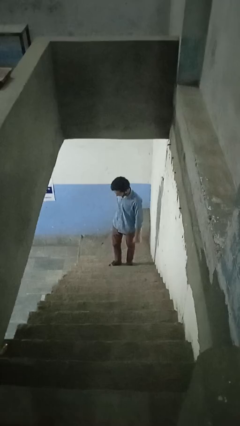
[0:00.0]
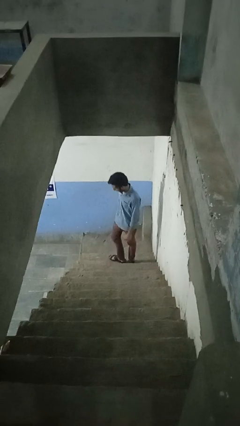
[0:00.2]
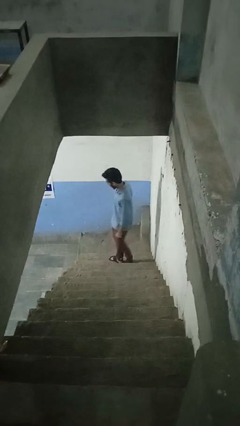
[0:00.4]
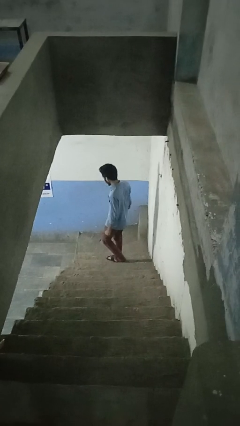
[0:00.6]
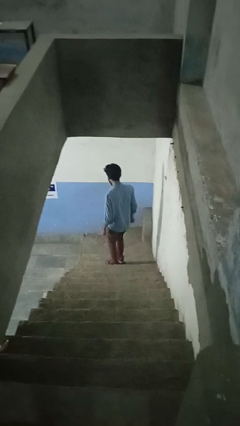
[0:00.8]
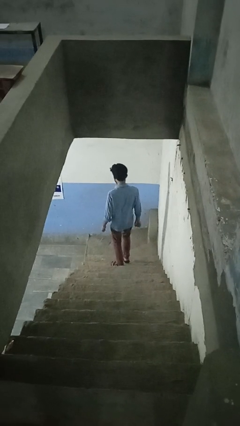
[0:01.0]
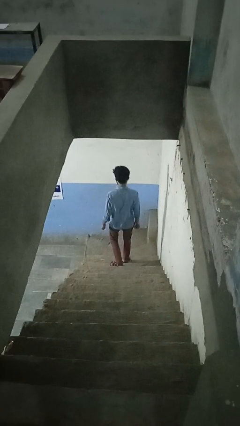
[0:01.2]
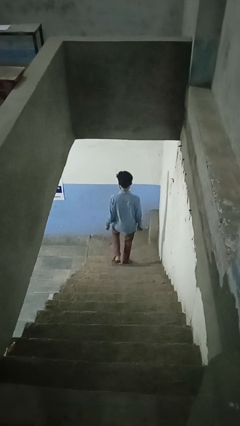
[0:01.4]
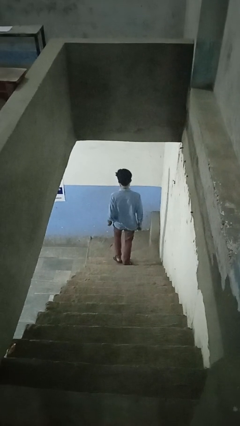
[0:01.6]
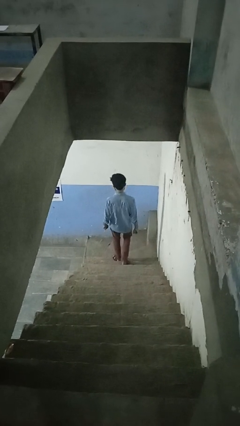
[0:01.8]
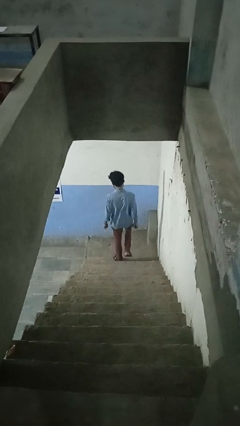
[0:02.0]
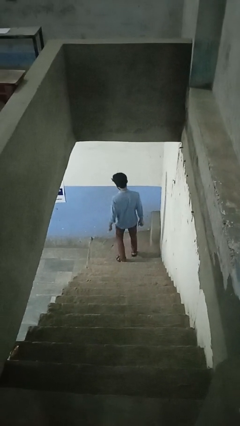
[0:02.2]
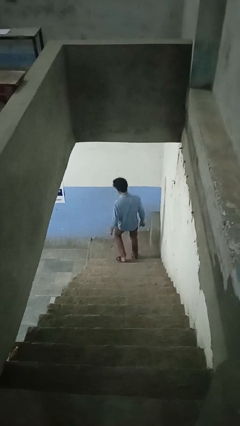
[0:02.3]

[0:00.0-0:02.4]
person climbs down stairs

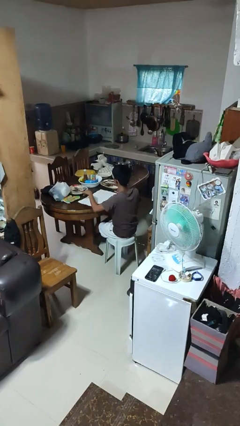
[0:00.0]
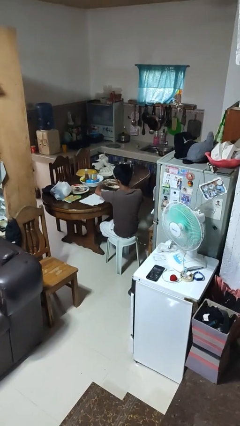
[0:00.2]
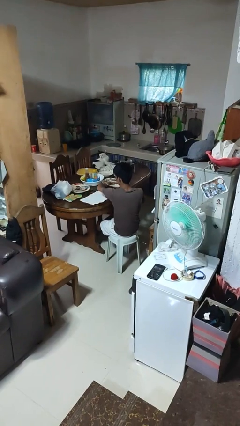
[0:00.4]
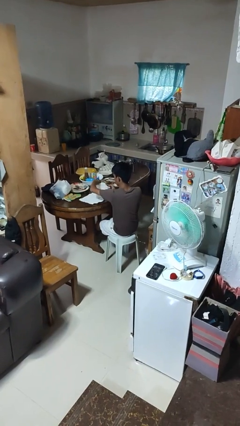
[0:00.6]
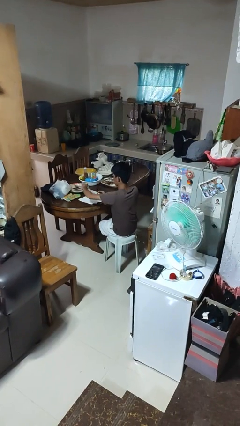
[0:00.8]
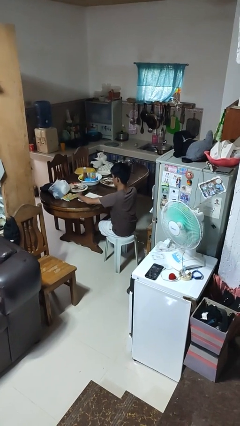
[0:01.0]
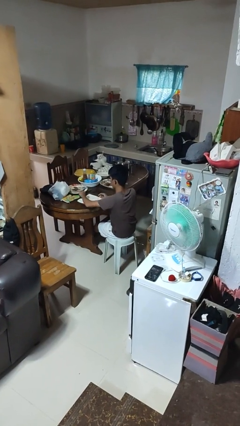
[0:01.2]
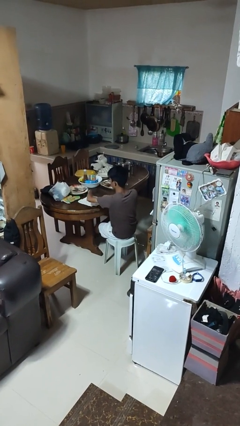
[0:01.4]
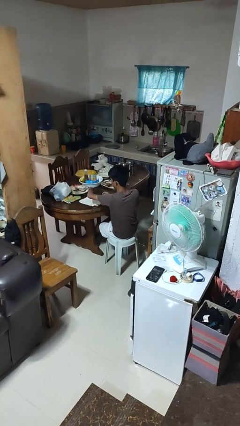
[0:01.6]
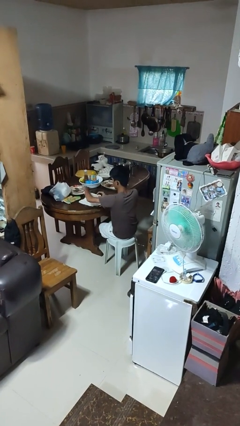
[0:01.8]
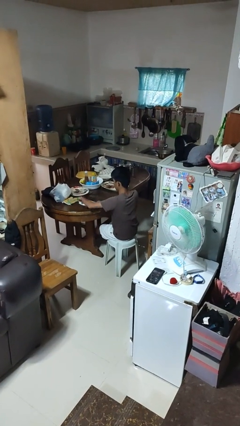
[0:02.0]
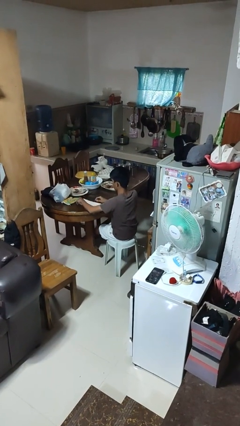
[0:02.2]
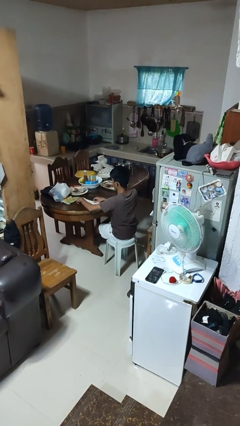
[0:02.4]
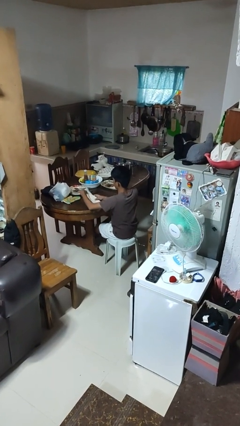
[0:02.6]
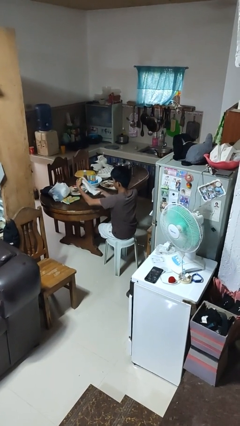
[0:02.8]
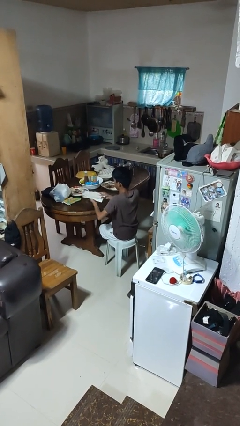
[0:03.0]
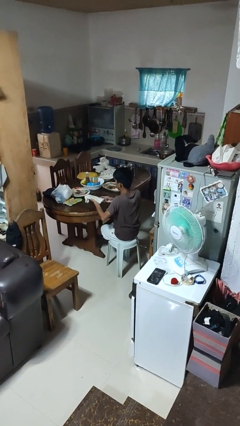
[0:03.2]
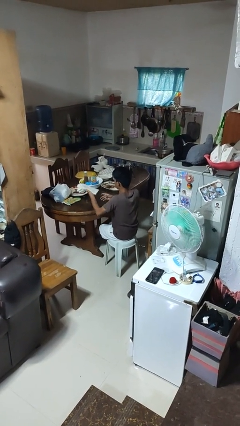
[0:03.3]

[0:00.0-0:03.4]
person folds tablecloth

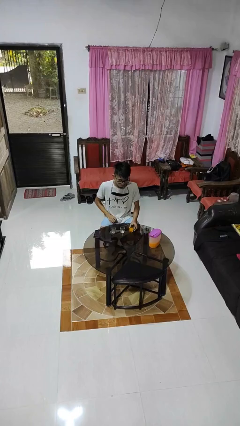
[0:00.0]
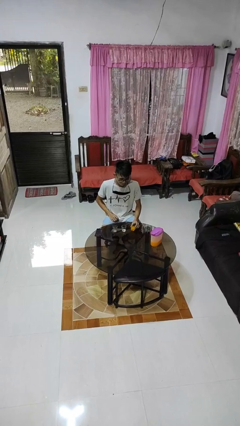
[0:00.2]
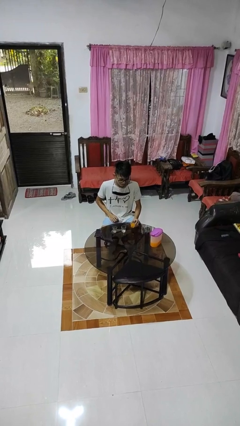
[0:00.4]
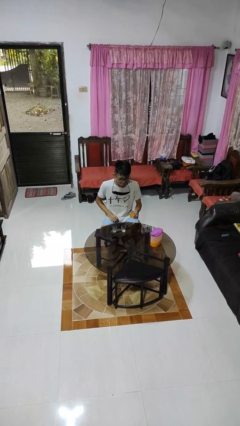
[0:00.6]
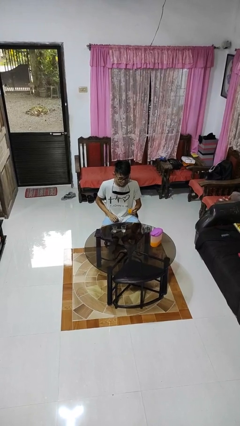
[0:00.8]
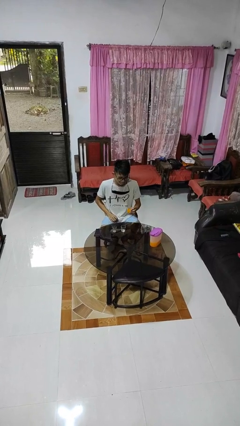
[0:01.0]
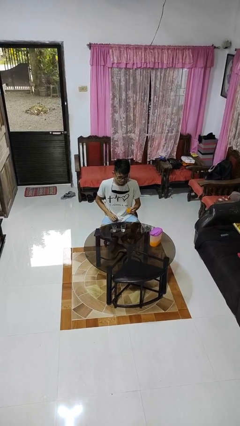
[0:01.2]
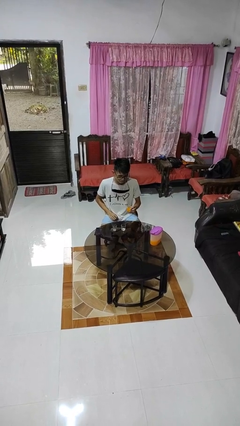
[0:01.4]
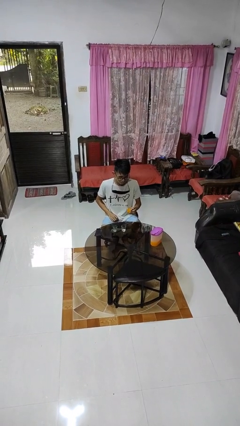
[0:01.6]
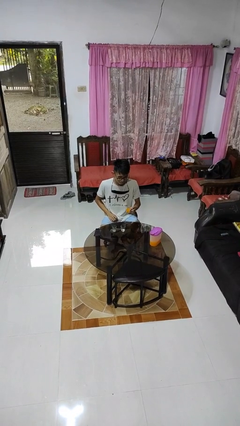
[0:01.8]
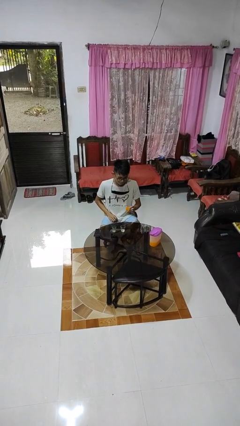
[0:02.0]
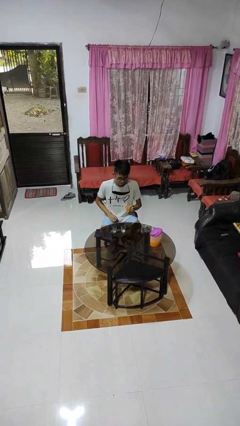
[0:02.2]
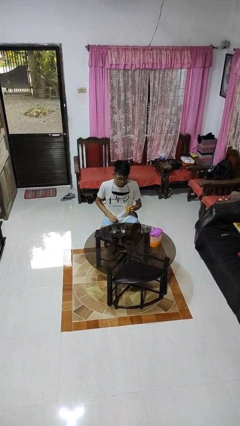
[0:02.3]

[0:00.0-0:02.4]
person picks up object from table

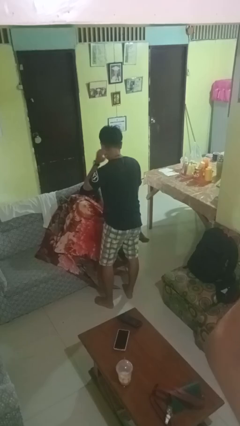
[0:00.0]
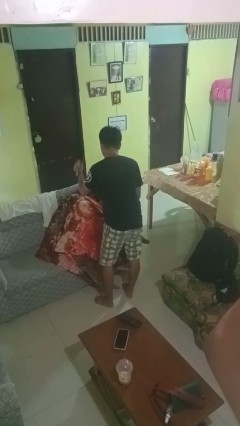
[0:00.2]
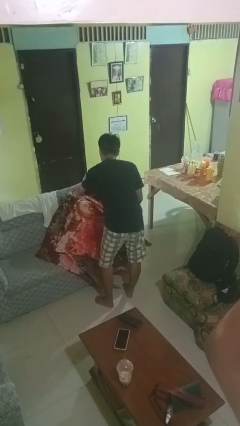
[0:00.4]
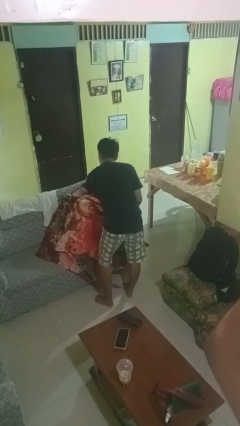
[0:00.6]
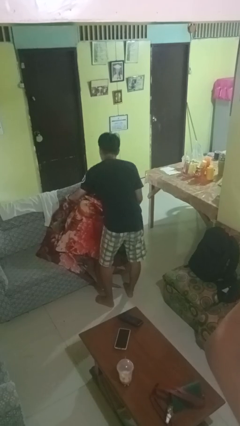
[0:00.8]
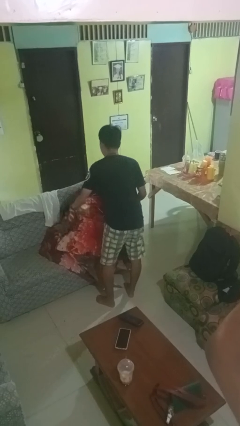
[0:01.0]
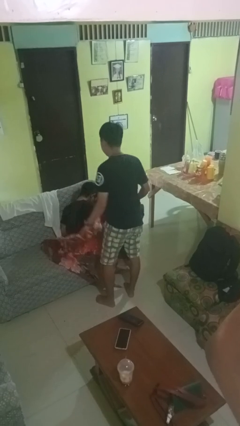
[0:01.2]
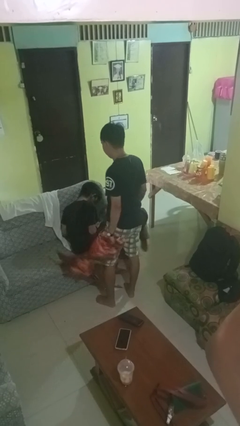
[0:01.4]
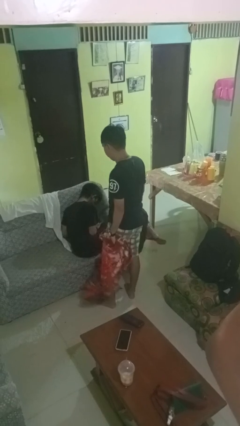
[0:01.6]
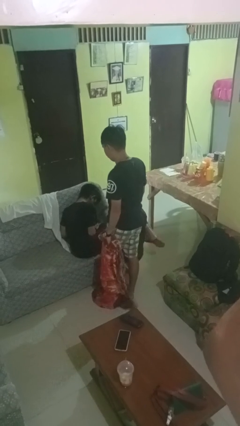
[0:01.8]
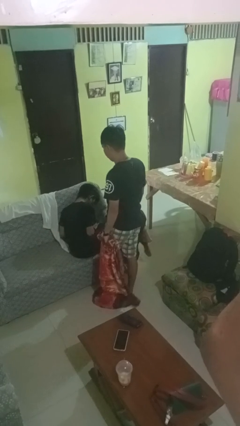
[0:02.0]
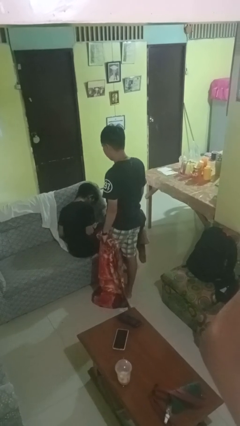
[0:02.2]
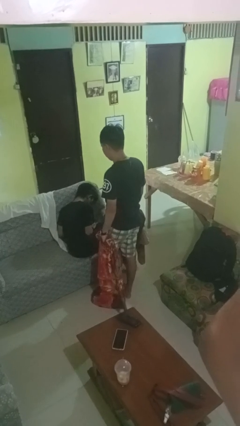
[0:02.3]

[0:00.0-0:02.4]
person uncovers friend with blanket

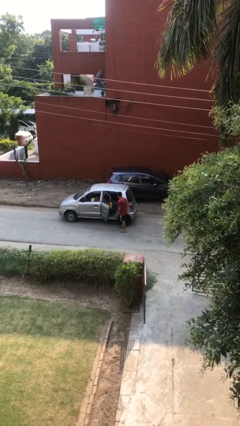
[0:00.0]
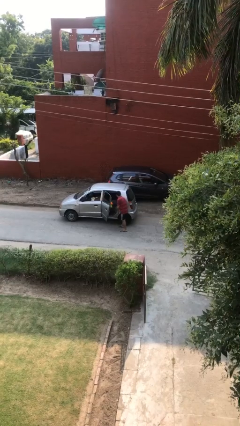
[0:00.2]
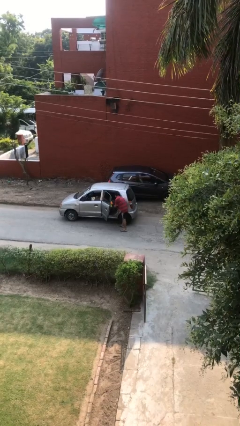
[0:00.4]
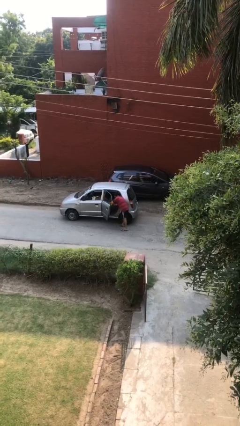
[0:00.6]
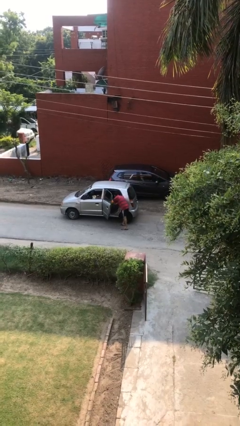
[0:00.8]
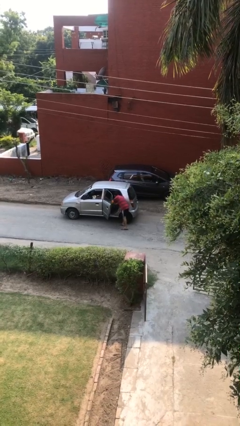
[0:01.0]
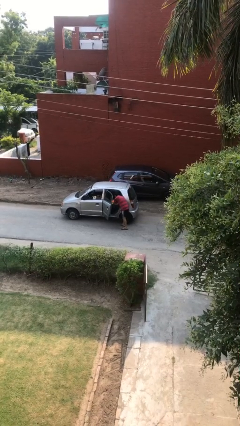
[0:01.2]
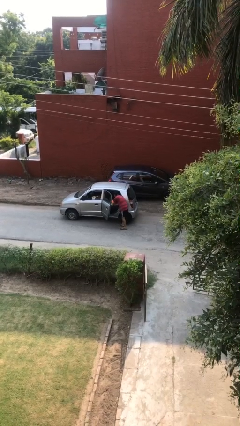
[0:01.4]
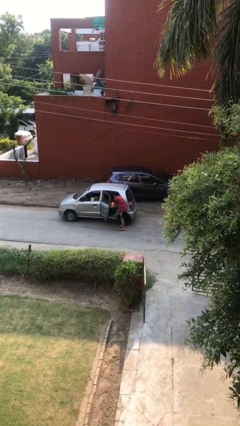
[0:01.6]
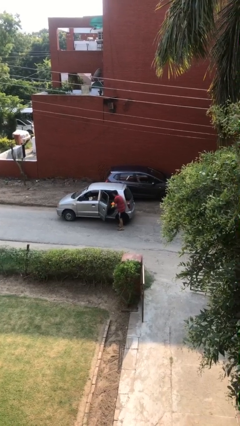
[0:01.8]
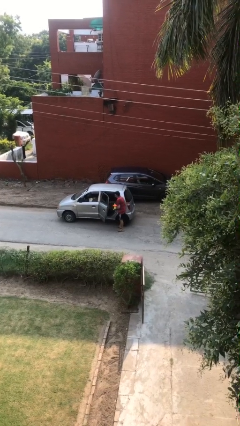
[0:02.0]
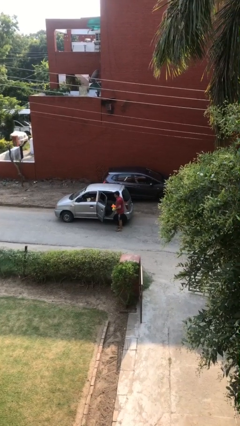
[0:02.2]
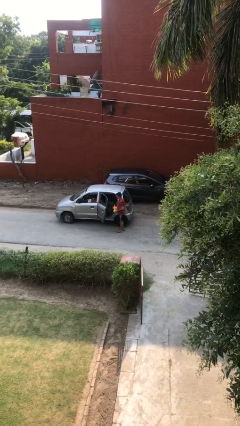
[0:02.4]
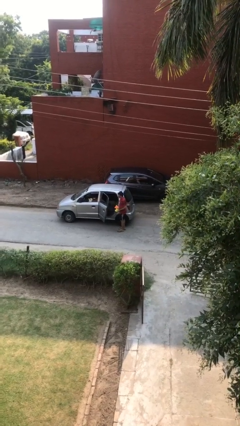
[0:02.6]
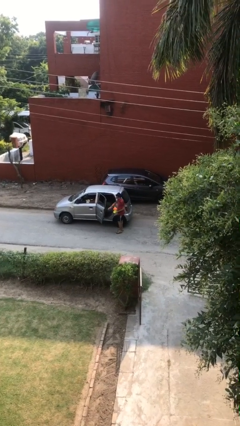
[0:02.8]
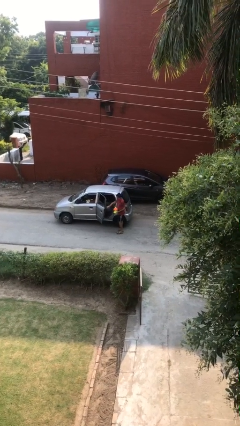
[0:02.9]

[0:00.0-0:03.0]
person unloads car

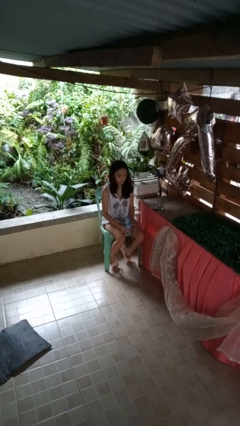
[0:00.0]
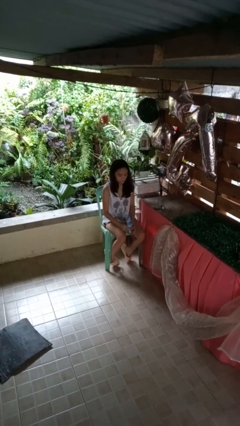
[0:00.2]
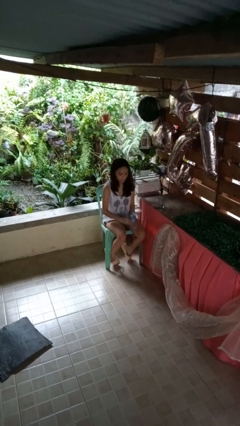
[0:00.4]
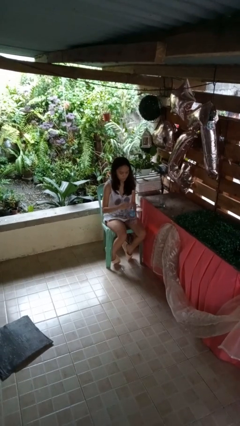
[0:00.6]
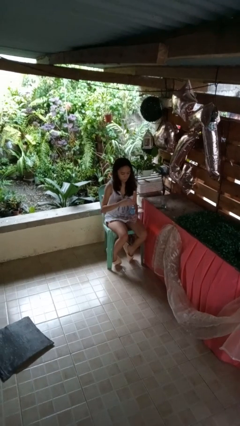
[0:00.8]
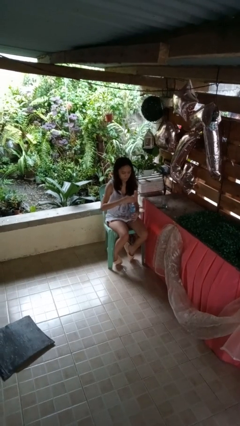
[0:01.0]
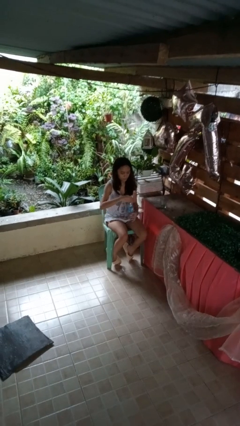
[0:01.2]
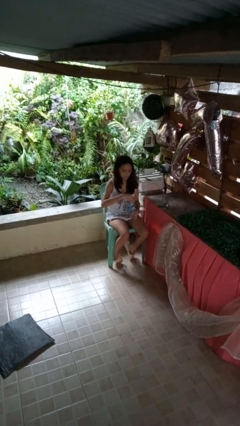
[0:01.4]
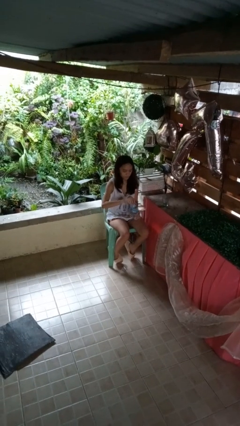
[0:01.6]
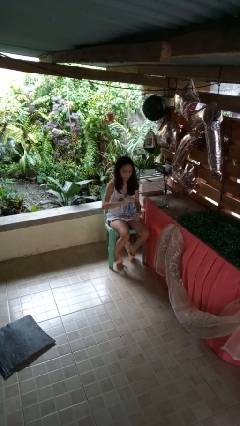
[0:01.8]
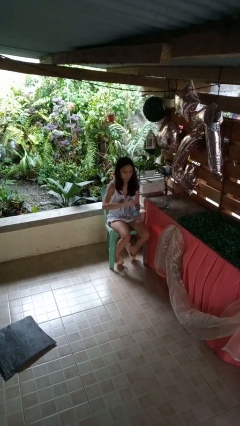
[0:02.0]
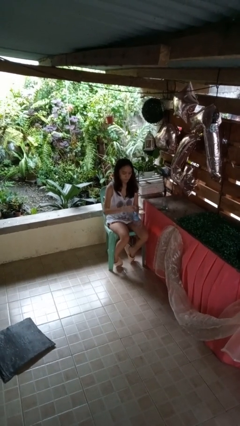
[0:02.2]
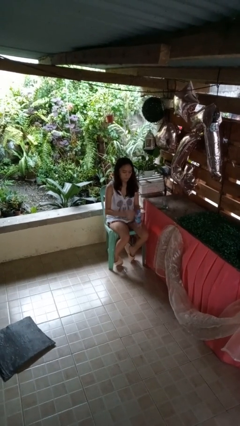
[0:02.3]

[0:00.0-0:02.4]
person screws lid to bottle

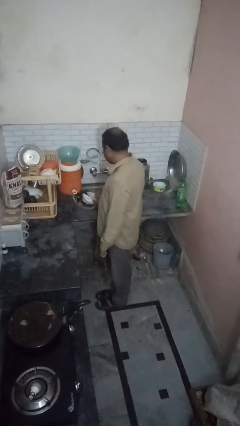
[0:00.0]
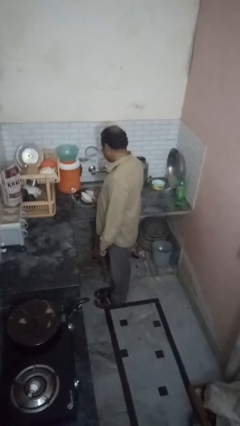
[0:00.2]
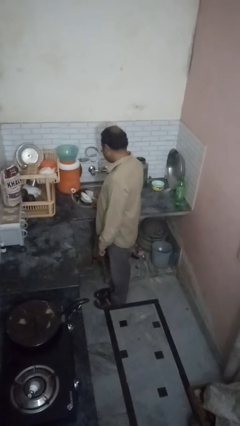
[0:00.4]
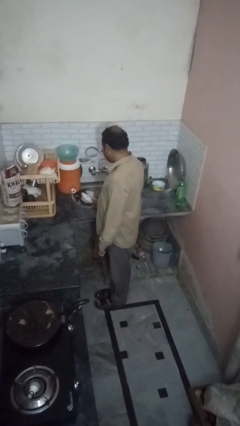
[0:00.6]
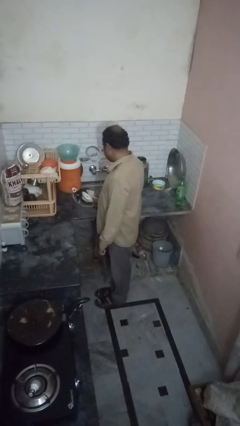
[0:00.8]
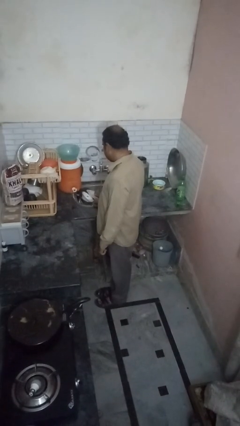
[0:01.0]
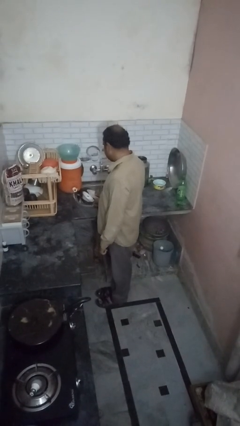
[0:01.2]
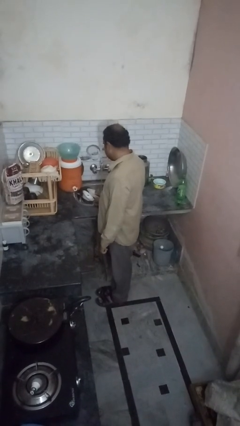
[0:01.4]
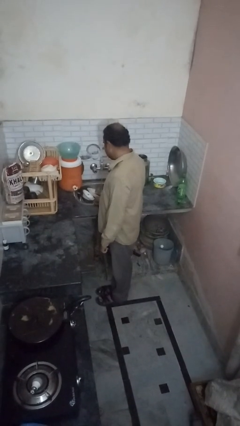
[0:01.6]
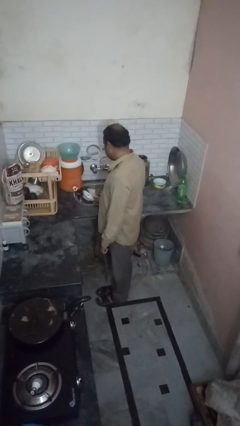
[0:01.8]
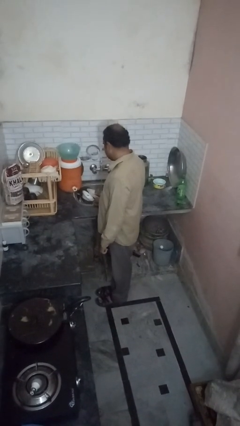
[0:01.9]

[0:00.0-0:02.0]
person opens dishwasher
